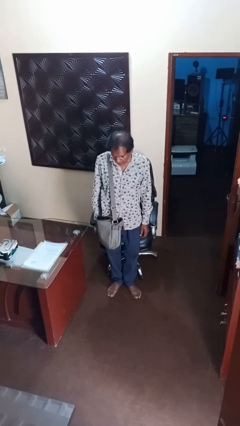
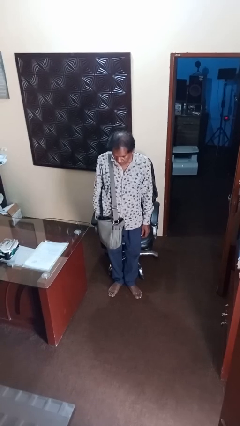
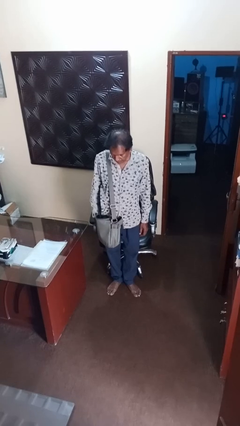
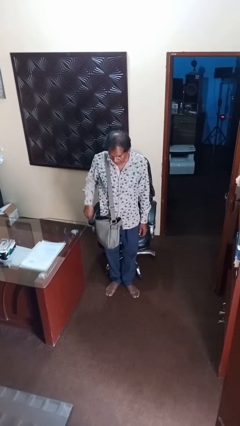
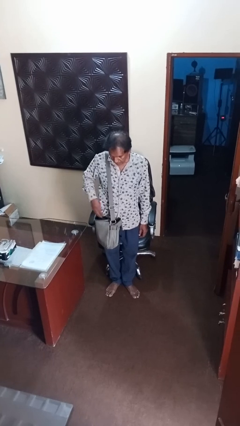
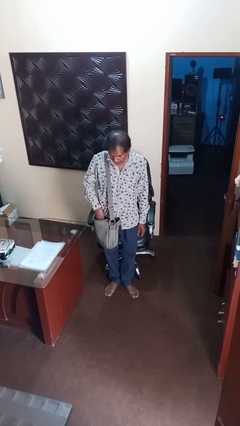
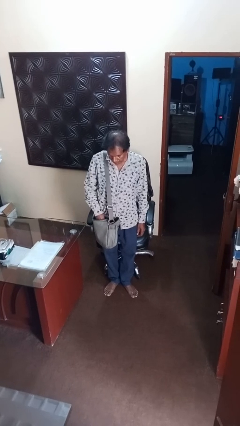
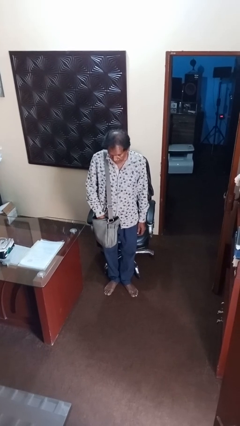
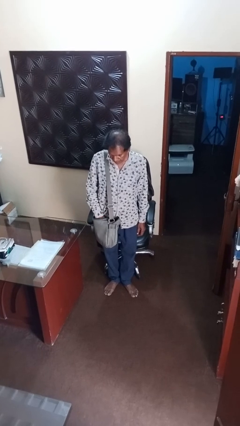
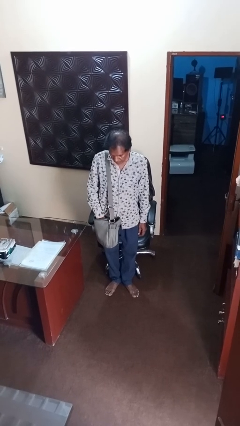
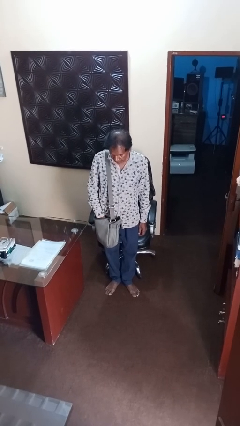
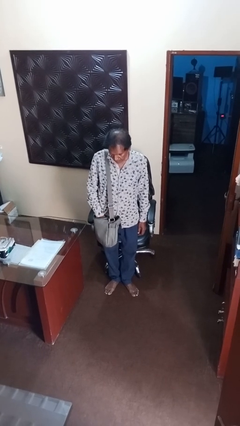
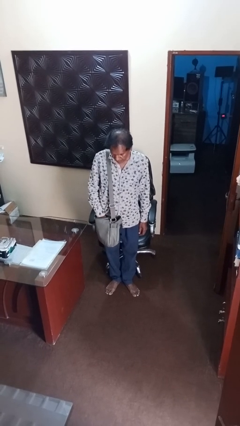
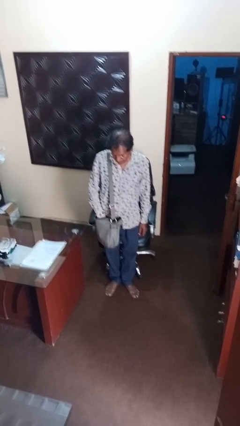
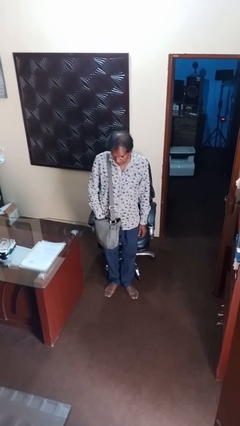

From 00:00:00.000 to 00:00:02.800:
person searches in backpack

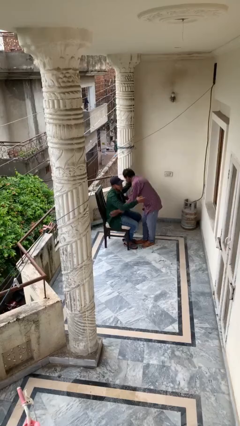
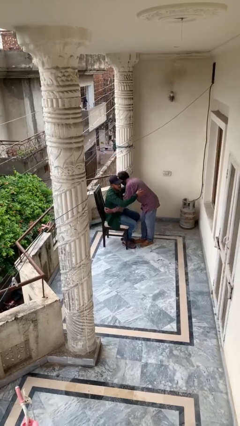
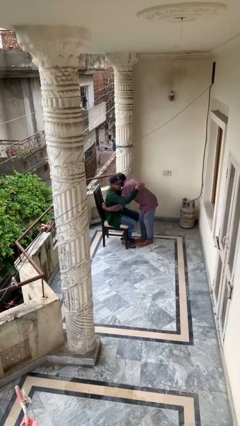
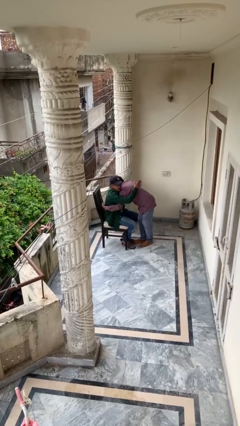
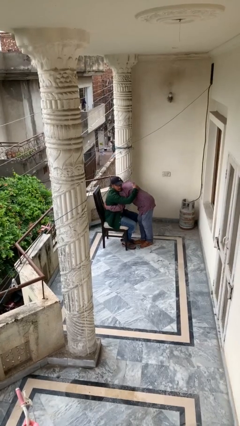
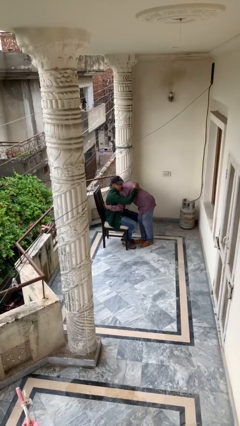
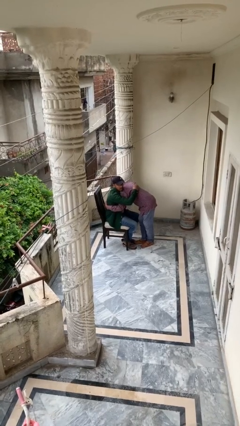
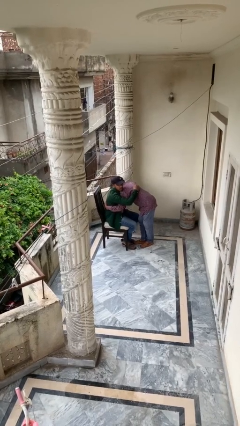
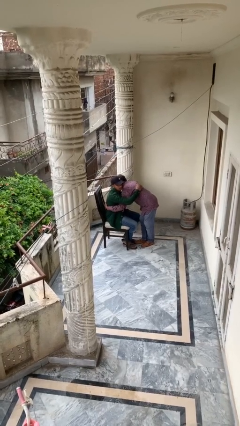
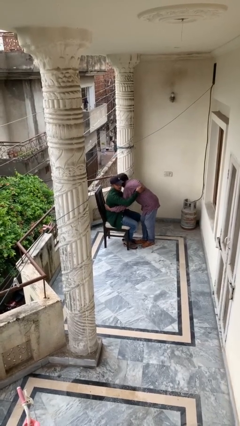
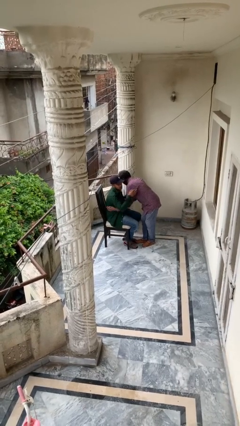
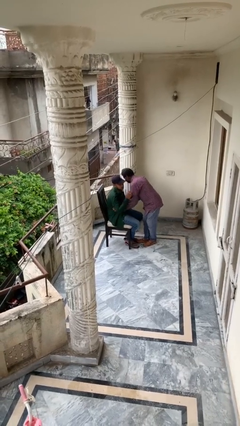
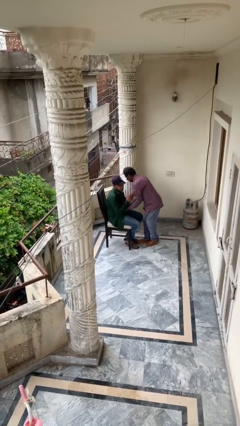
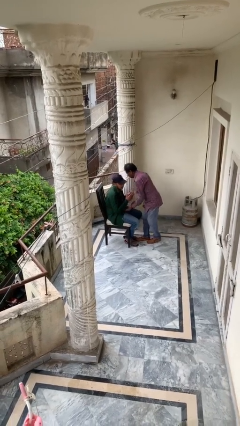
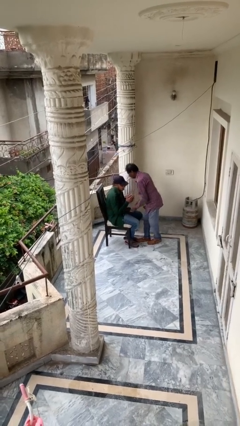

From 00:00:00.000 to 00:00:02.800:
person embraces person

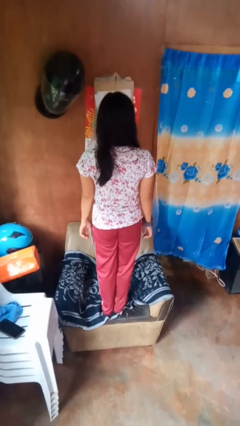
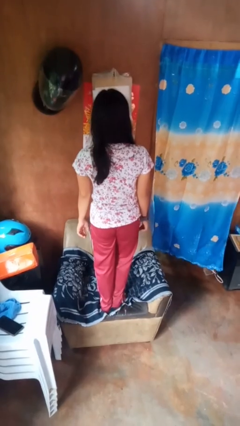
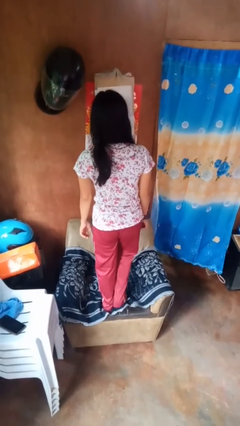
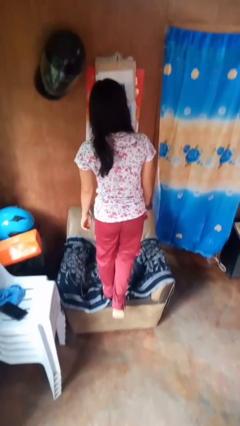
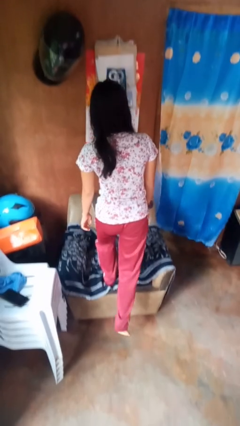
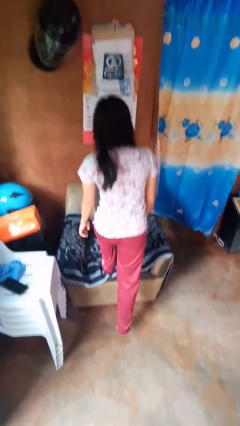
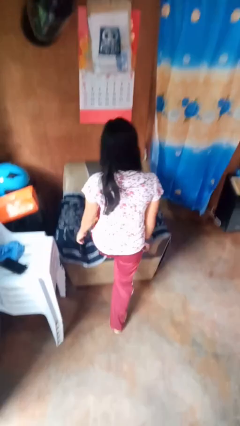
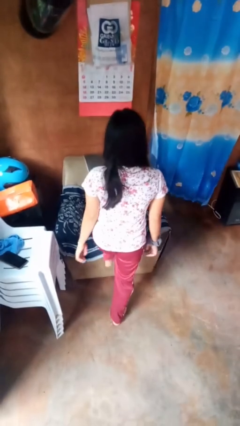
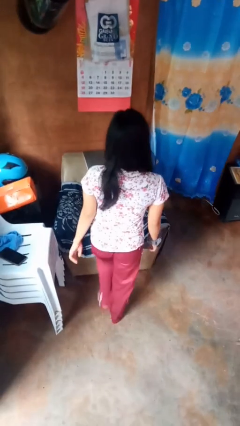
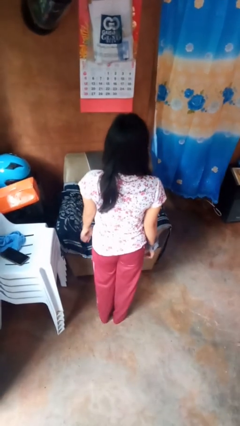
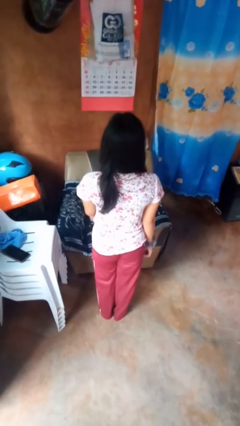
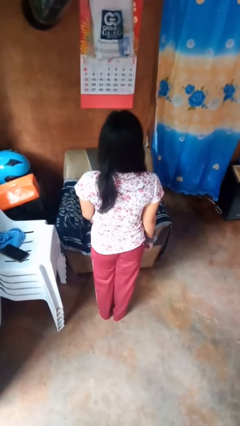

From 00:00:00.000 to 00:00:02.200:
person climbs off couch

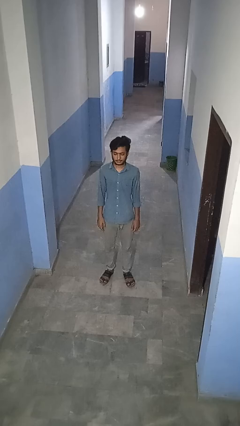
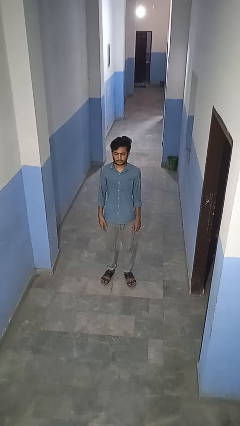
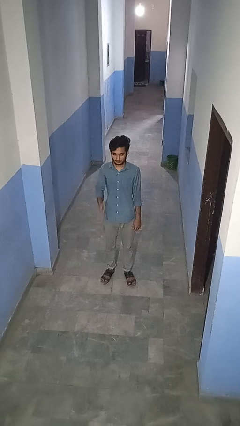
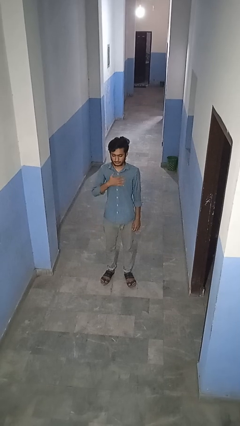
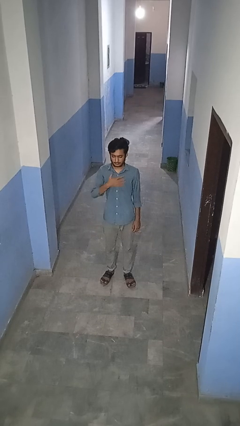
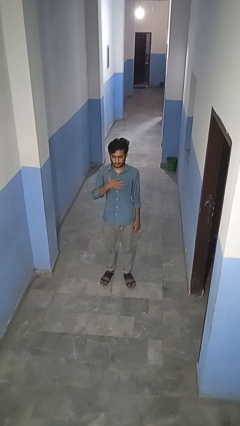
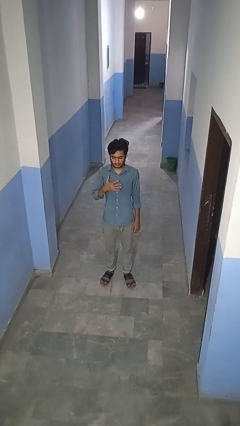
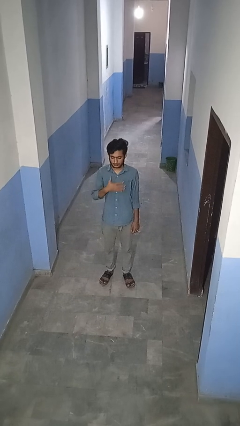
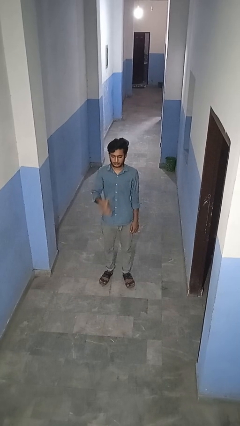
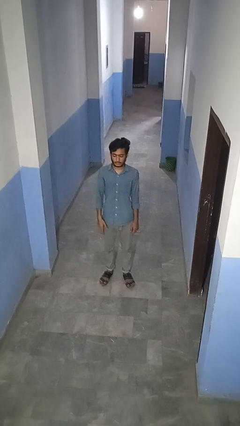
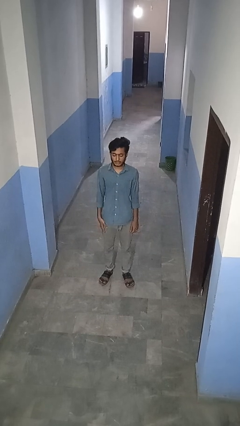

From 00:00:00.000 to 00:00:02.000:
person drums on chest

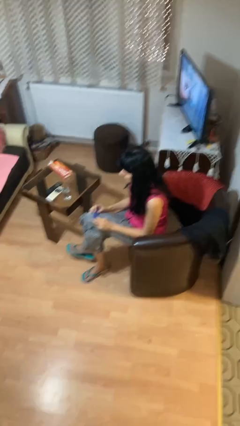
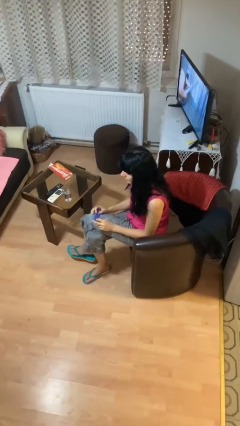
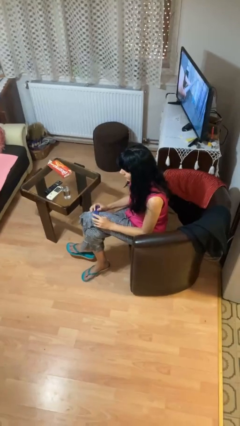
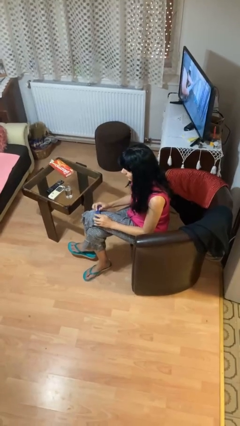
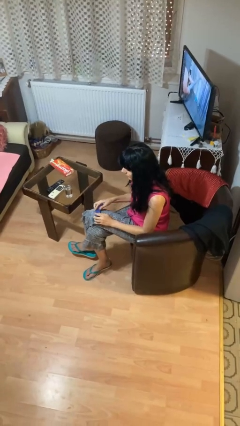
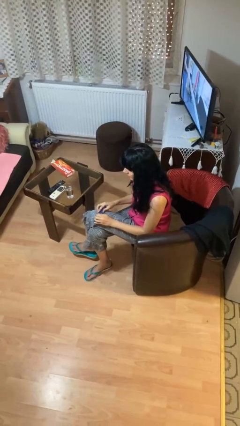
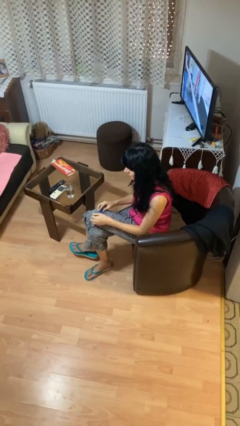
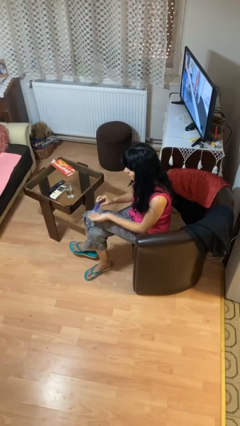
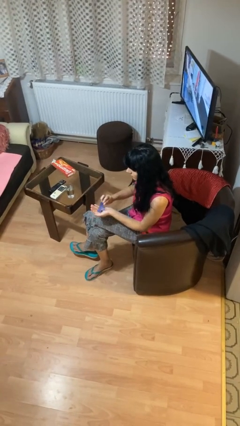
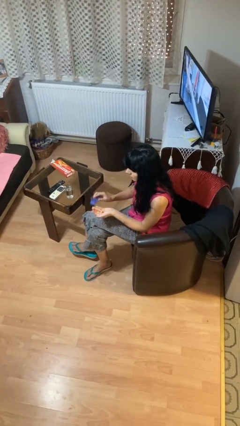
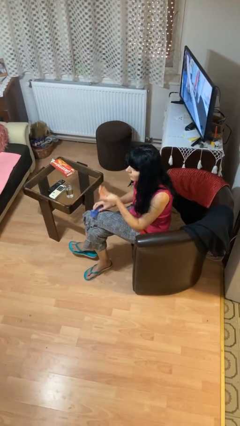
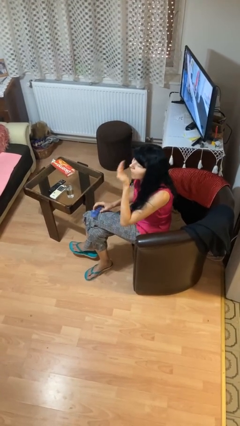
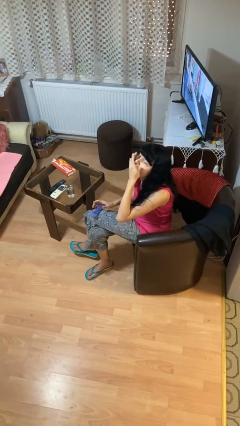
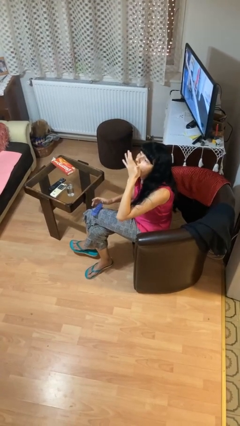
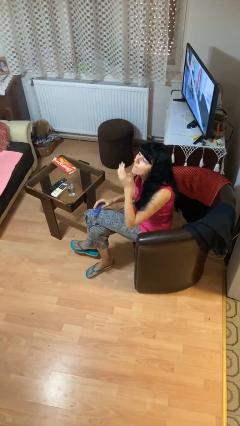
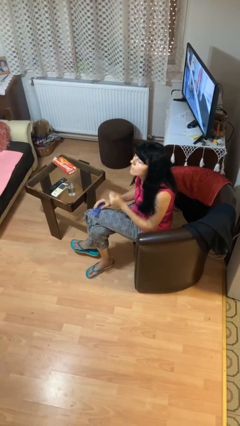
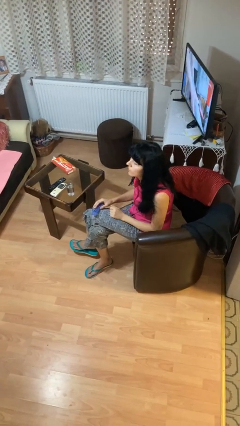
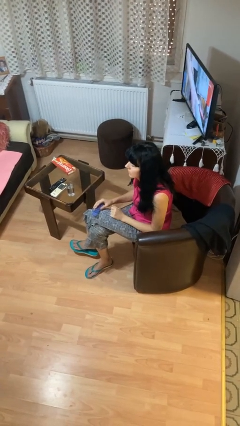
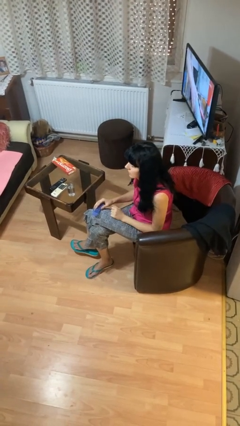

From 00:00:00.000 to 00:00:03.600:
person takes medicine pills

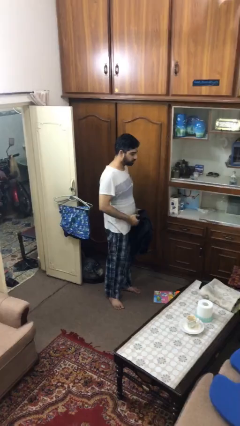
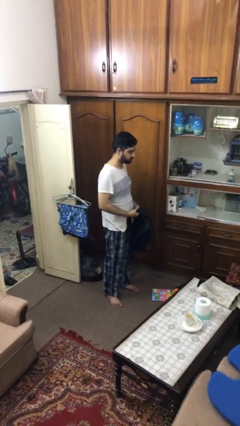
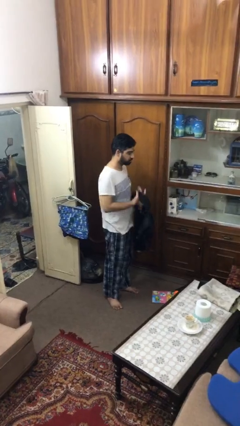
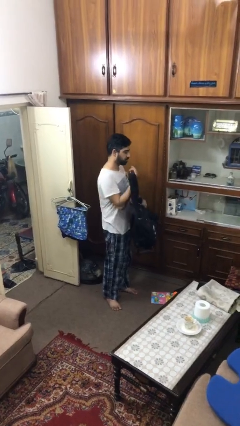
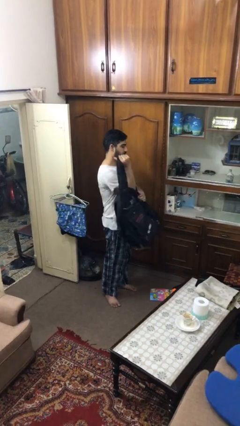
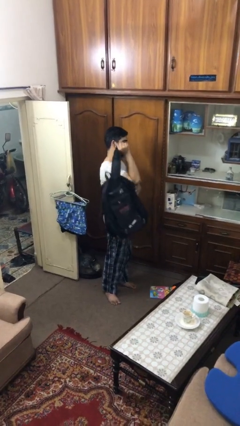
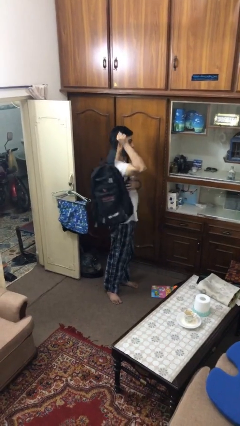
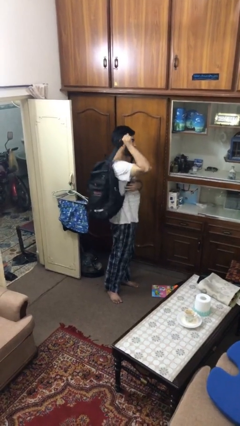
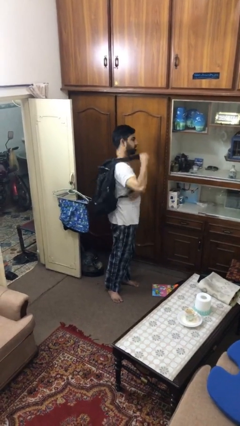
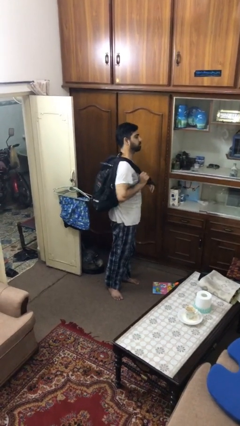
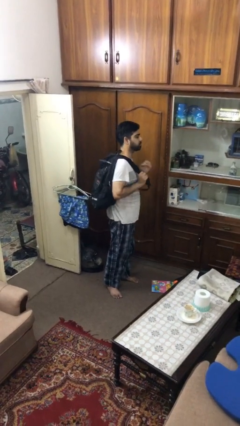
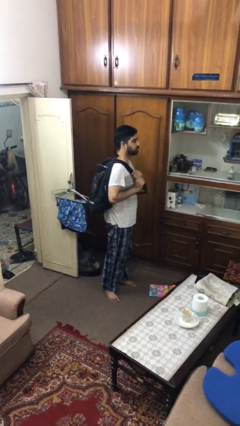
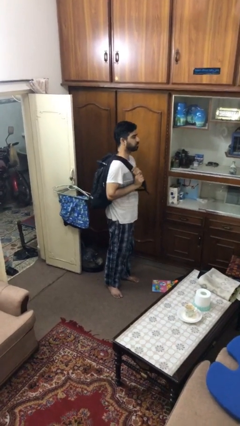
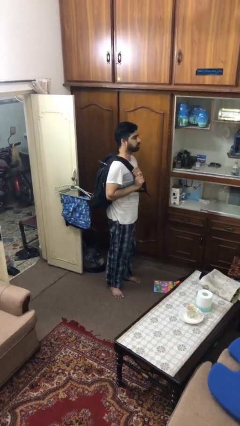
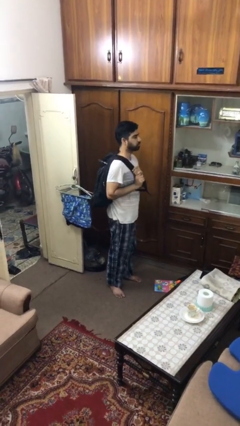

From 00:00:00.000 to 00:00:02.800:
person puts on backpack

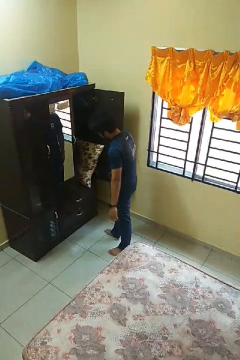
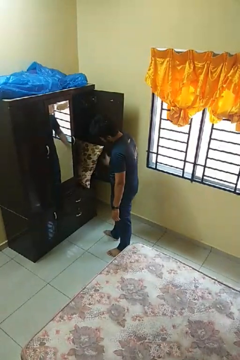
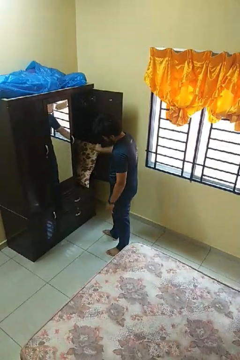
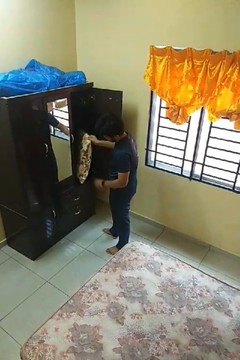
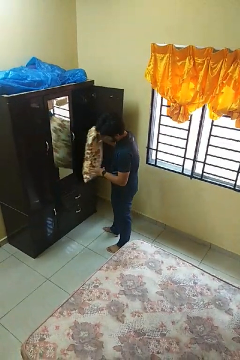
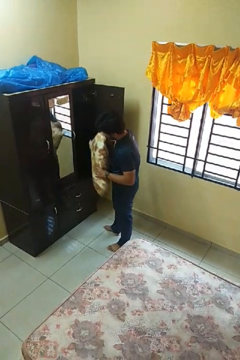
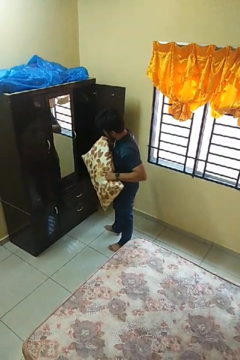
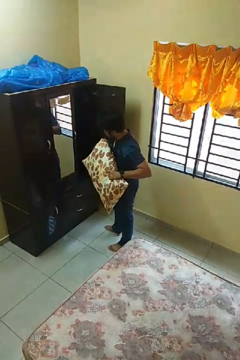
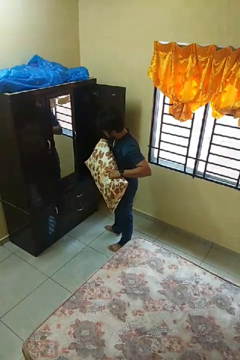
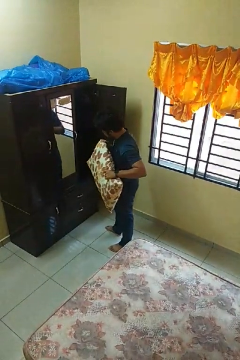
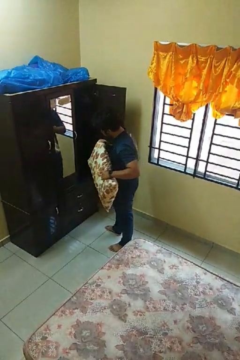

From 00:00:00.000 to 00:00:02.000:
person picks up object from cabinet
